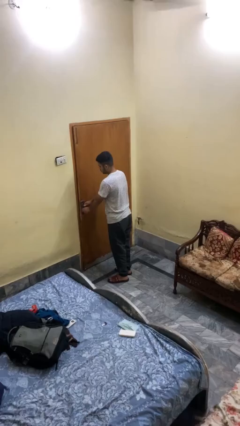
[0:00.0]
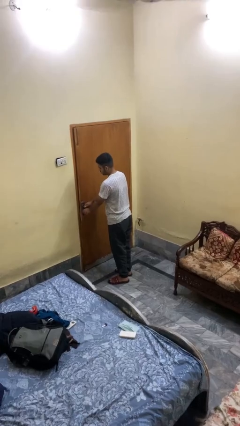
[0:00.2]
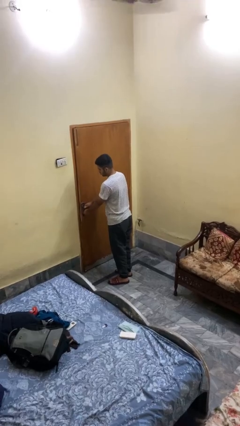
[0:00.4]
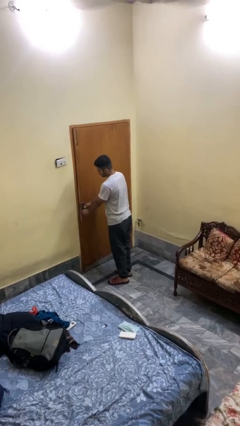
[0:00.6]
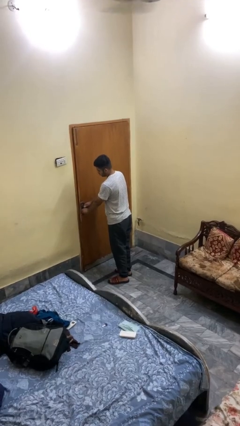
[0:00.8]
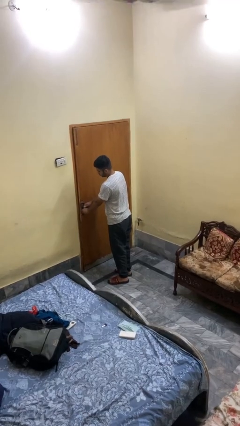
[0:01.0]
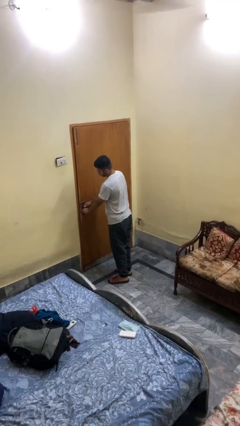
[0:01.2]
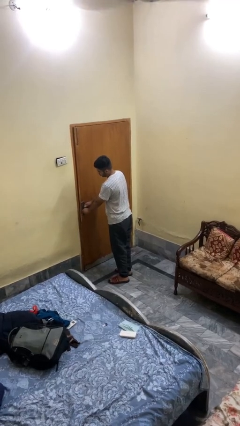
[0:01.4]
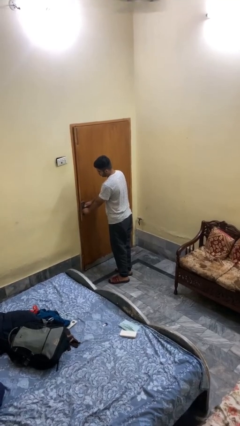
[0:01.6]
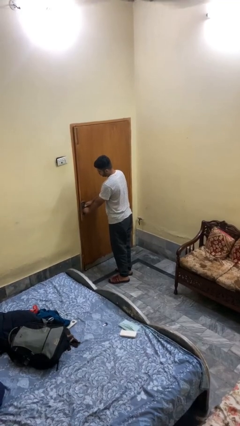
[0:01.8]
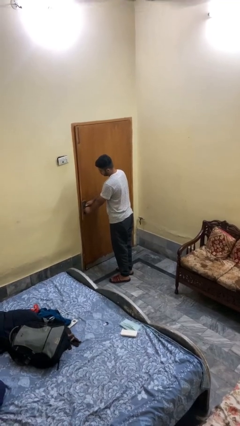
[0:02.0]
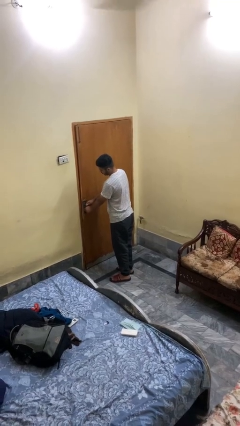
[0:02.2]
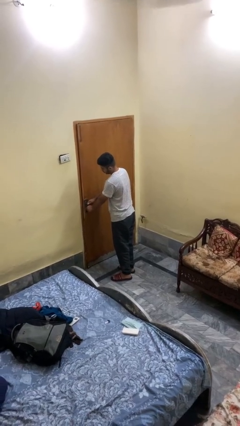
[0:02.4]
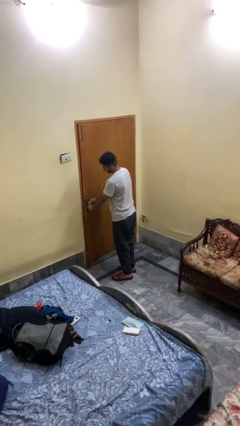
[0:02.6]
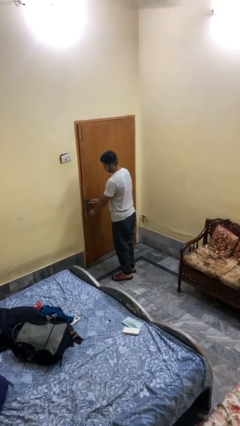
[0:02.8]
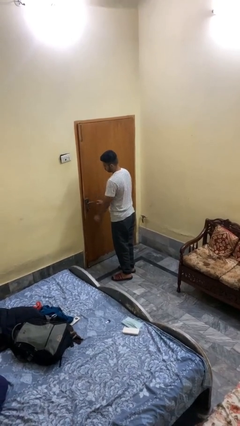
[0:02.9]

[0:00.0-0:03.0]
person locks door with keys

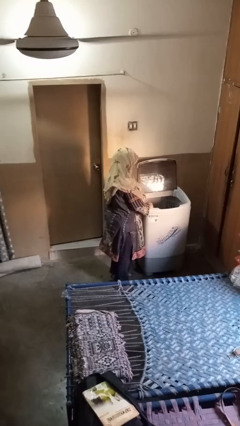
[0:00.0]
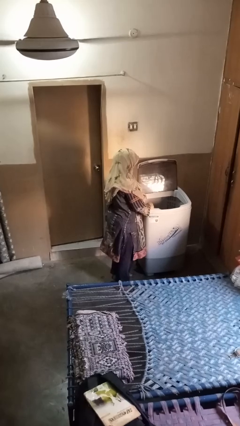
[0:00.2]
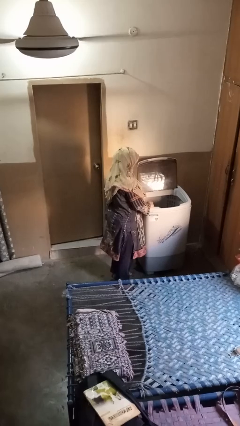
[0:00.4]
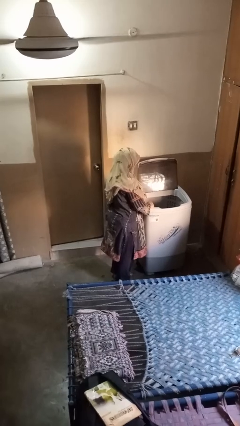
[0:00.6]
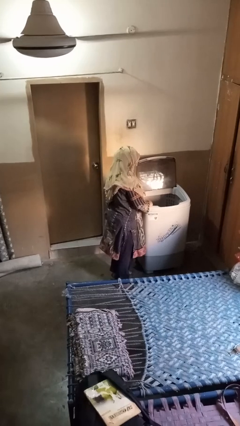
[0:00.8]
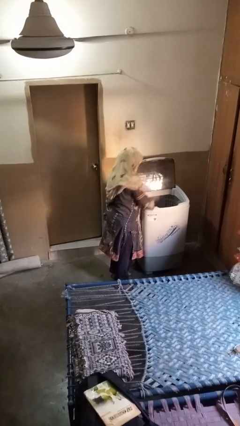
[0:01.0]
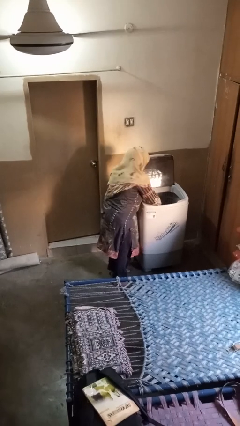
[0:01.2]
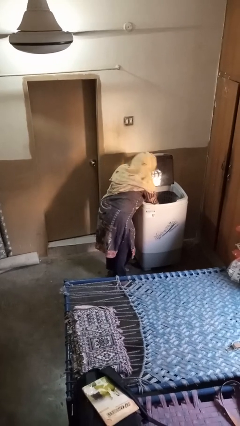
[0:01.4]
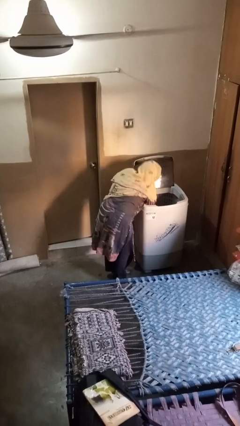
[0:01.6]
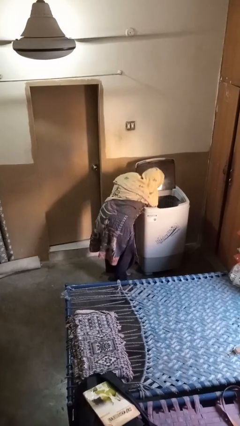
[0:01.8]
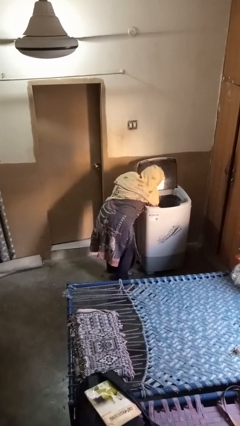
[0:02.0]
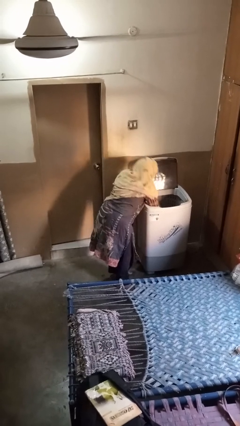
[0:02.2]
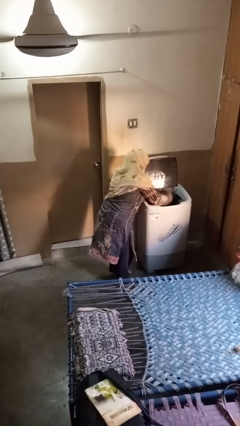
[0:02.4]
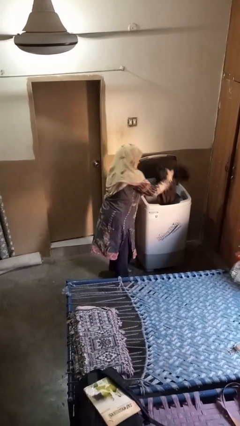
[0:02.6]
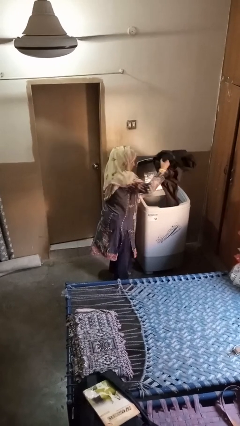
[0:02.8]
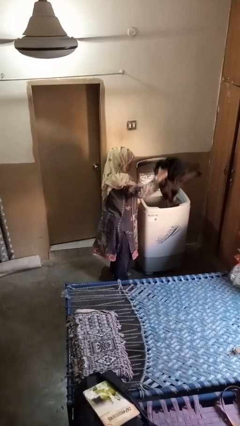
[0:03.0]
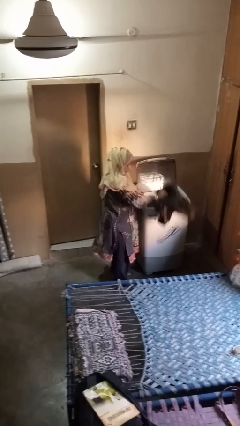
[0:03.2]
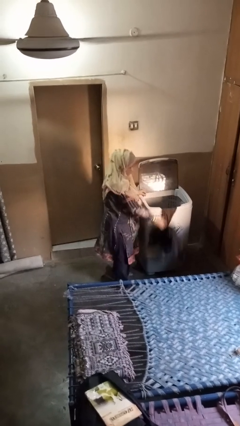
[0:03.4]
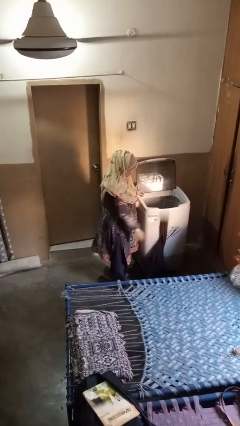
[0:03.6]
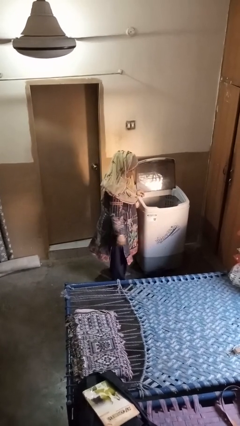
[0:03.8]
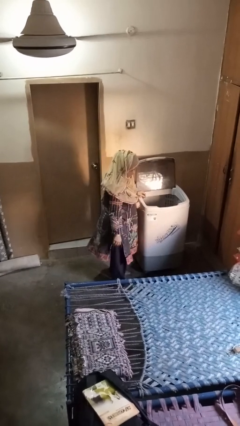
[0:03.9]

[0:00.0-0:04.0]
person unloads clotheswasher

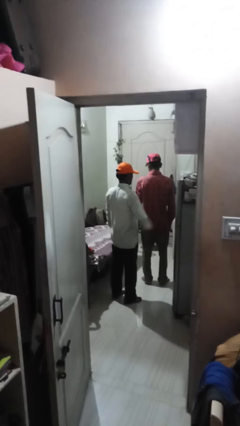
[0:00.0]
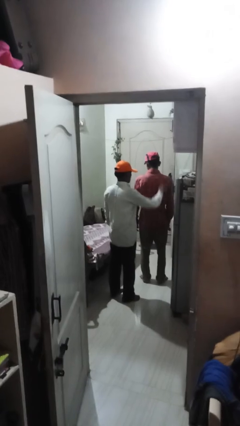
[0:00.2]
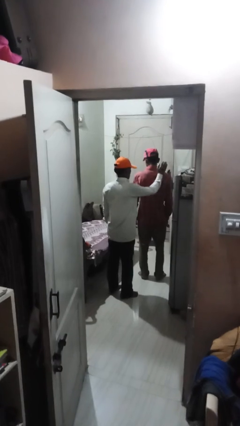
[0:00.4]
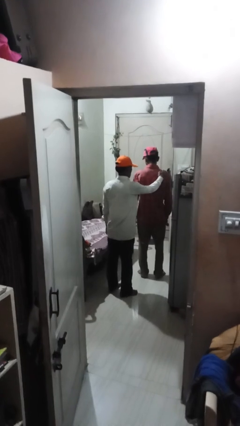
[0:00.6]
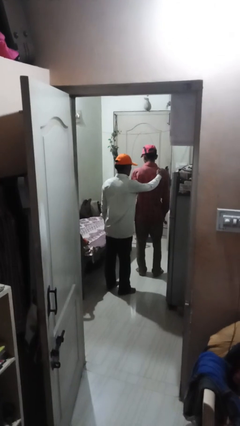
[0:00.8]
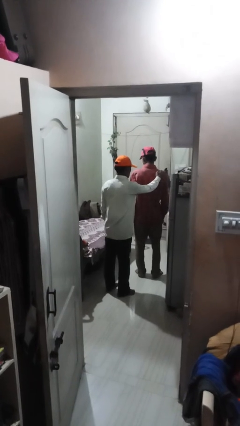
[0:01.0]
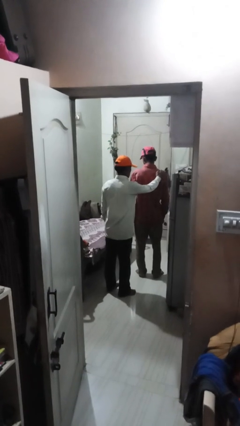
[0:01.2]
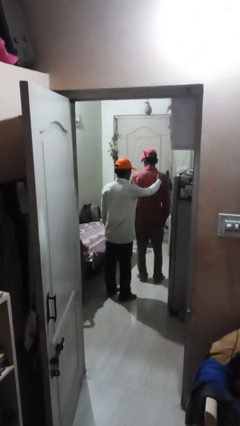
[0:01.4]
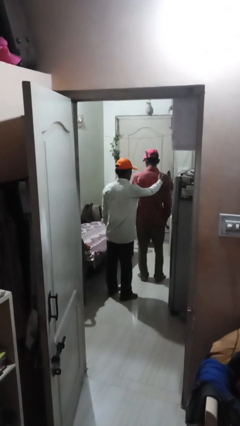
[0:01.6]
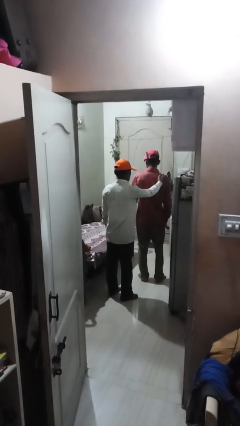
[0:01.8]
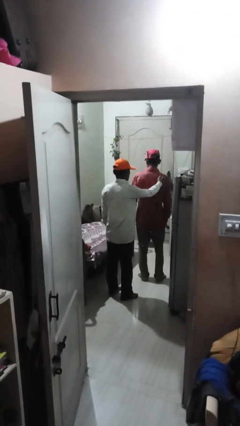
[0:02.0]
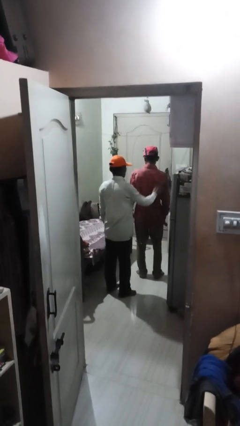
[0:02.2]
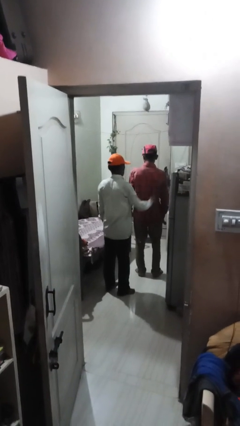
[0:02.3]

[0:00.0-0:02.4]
person touches back of person

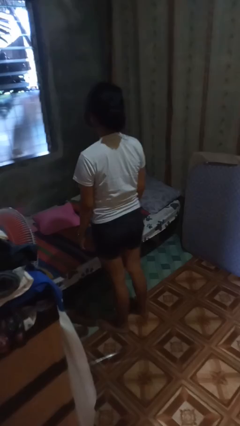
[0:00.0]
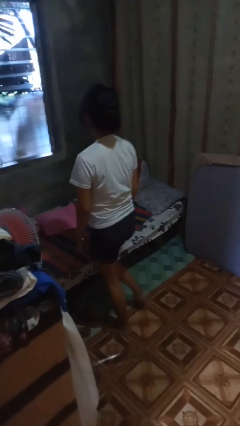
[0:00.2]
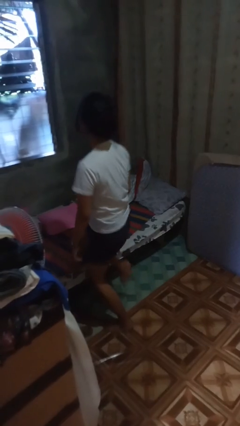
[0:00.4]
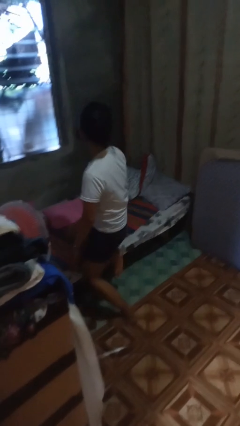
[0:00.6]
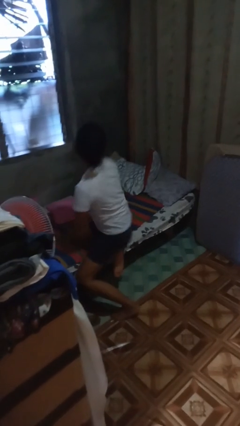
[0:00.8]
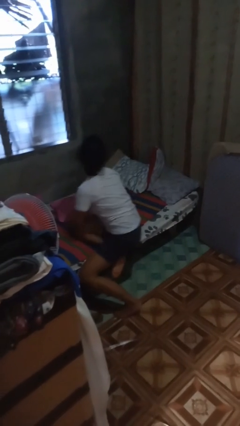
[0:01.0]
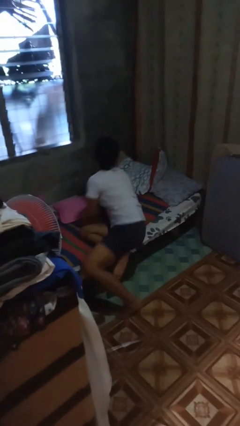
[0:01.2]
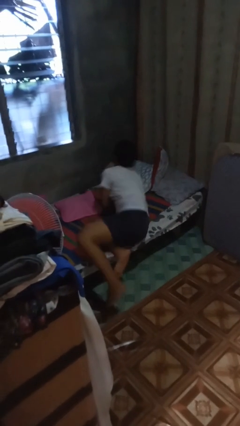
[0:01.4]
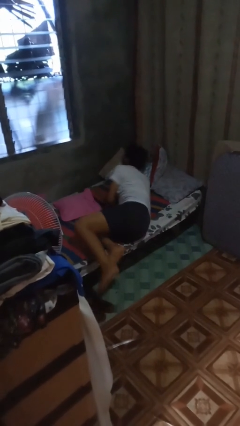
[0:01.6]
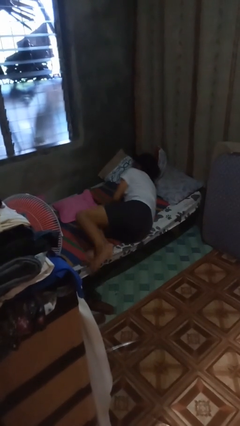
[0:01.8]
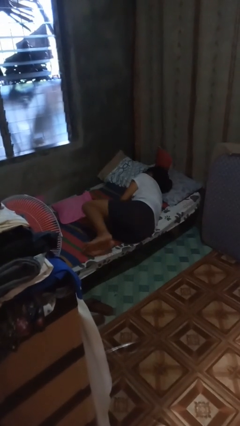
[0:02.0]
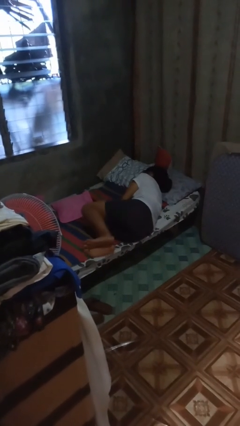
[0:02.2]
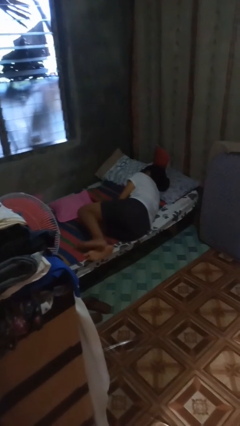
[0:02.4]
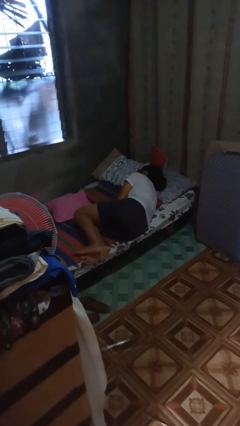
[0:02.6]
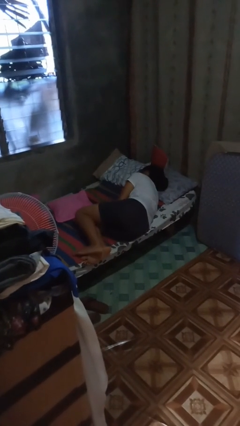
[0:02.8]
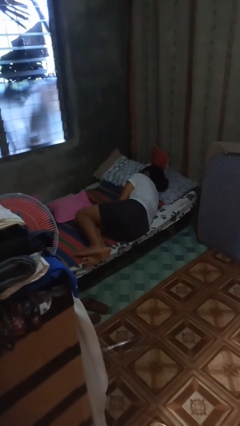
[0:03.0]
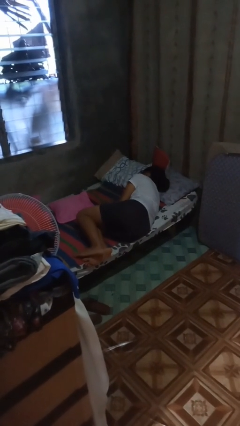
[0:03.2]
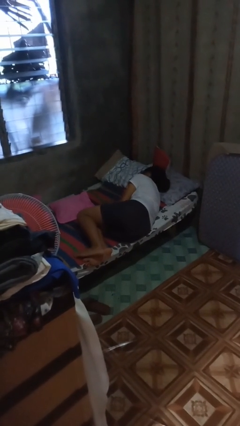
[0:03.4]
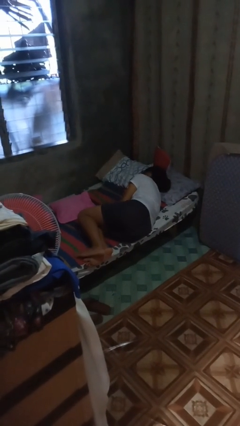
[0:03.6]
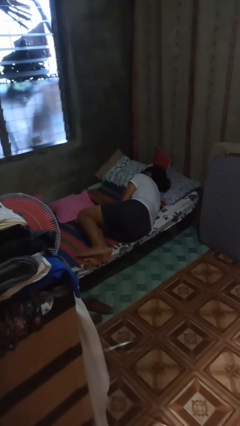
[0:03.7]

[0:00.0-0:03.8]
person lies down on bed

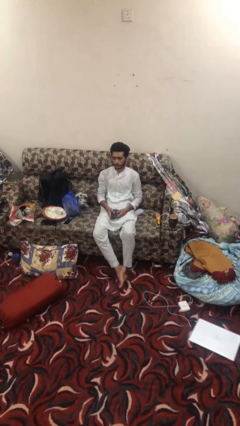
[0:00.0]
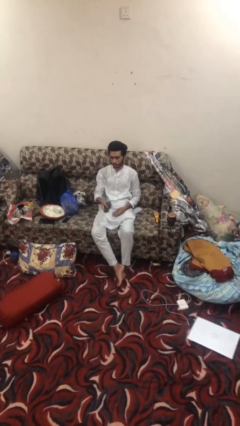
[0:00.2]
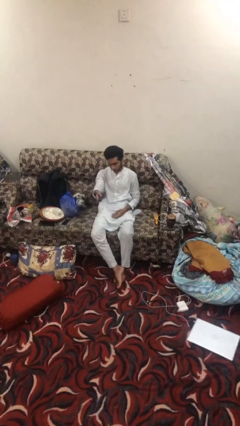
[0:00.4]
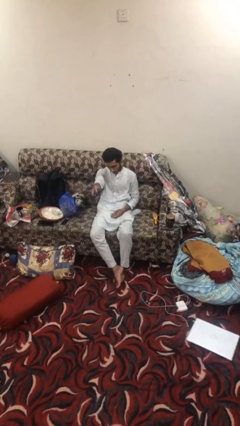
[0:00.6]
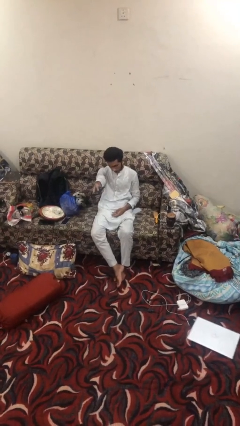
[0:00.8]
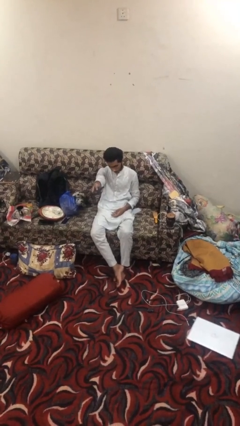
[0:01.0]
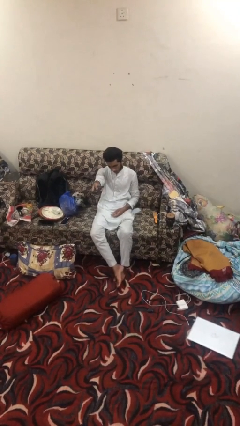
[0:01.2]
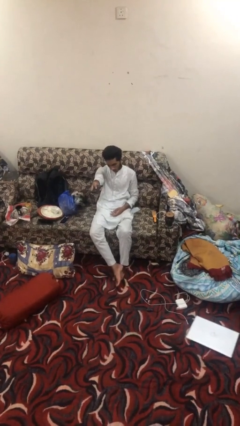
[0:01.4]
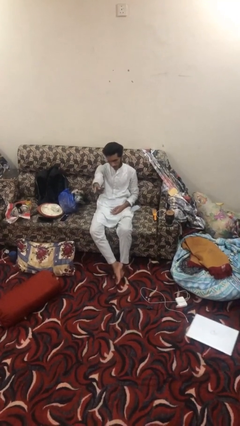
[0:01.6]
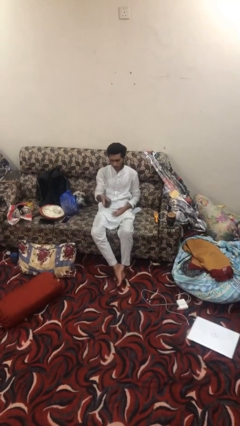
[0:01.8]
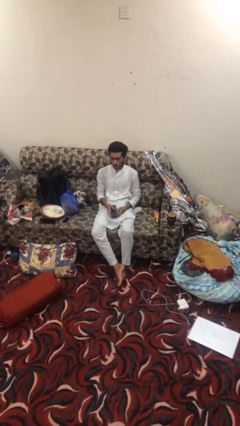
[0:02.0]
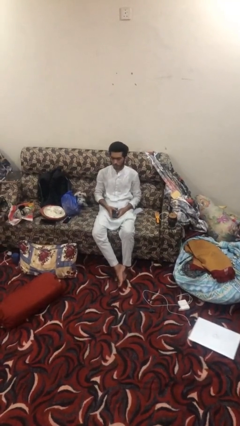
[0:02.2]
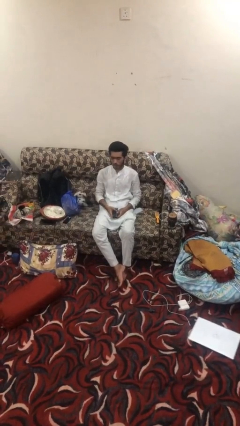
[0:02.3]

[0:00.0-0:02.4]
person uses television remote

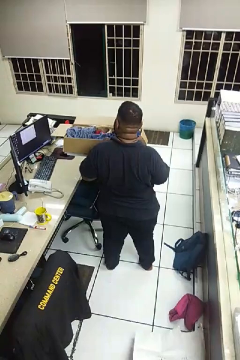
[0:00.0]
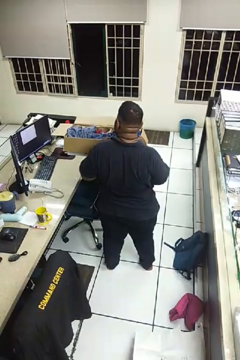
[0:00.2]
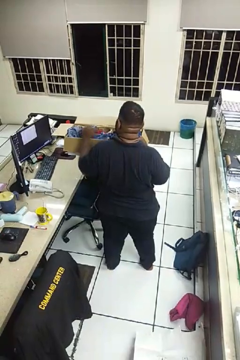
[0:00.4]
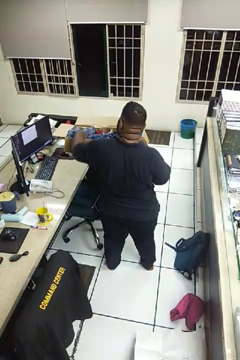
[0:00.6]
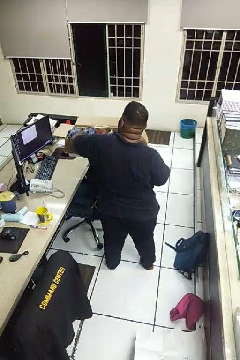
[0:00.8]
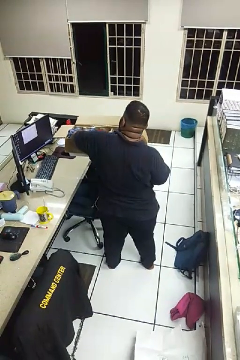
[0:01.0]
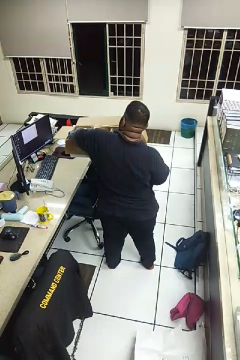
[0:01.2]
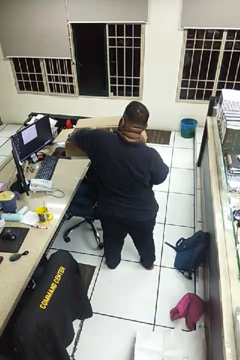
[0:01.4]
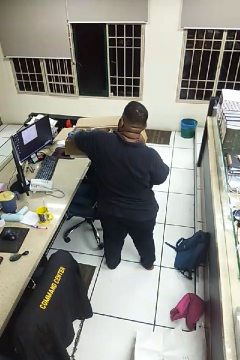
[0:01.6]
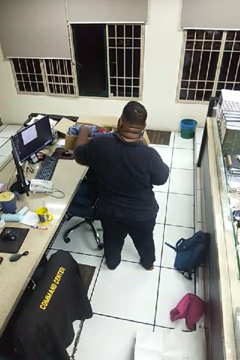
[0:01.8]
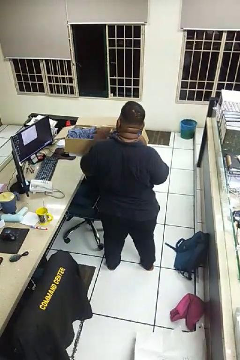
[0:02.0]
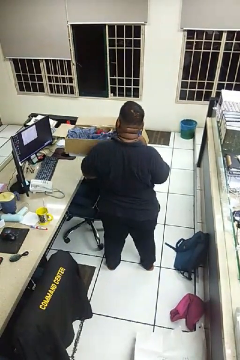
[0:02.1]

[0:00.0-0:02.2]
person searches in box
